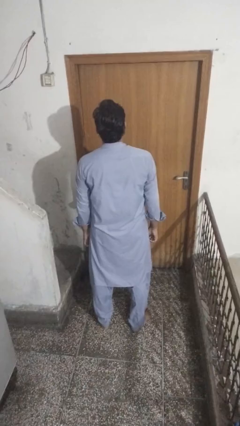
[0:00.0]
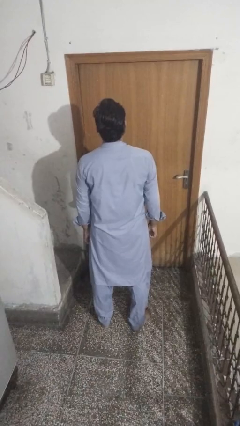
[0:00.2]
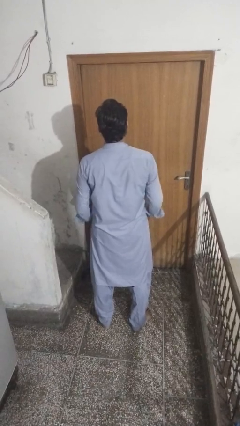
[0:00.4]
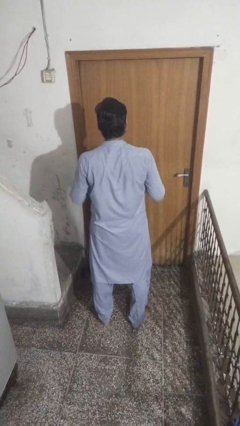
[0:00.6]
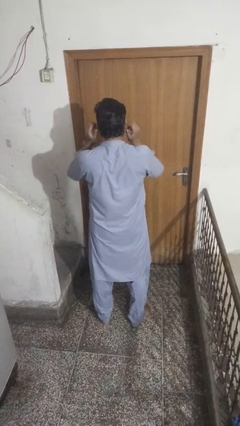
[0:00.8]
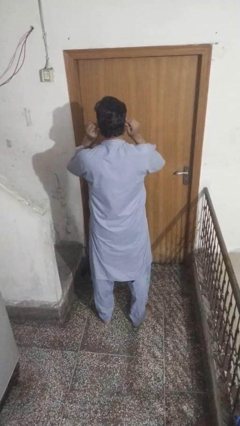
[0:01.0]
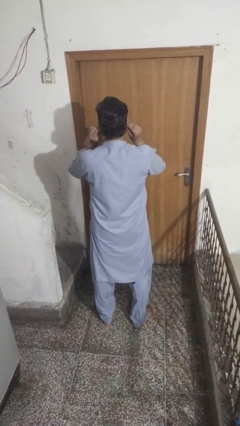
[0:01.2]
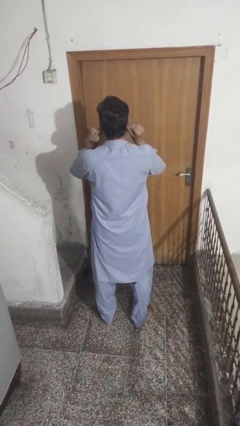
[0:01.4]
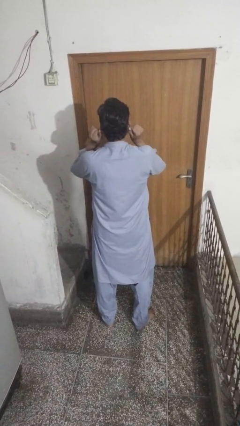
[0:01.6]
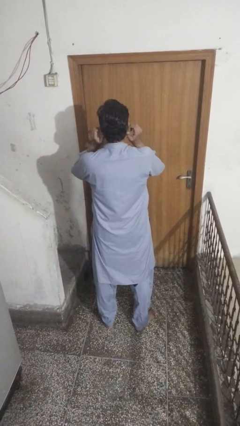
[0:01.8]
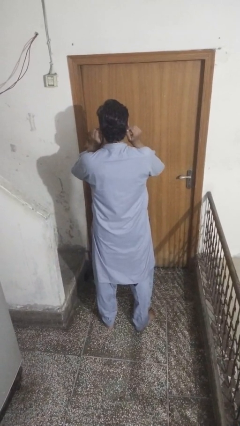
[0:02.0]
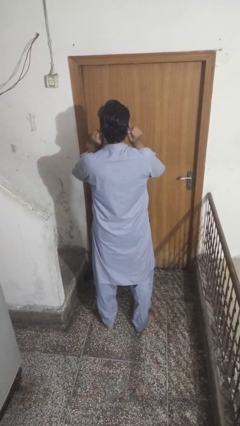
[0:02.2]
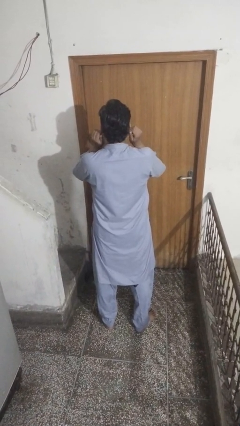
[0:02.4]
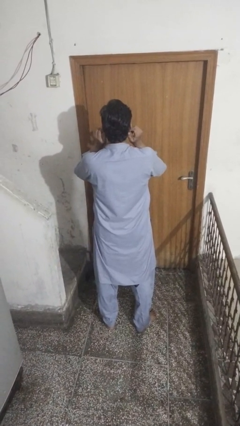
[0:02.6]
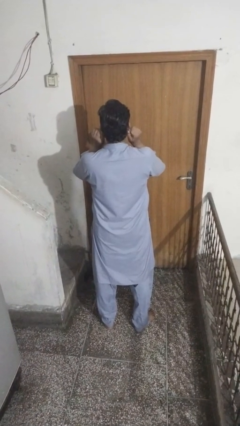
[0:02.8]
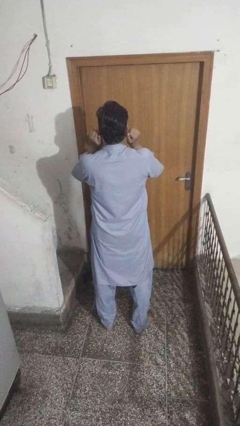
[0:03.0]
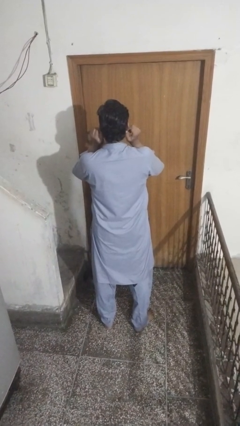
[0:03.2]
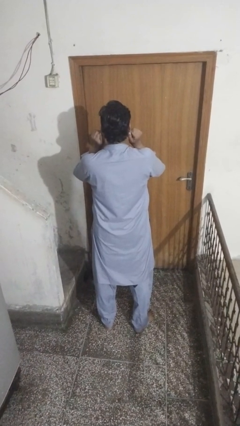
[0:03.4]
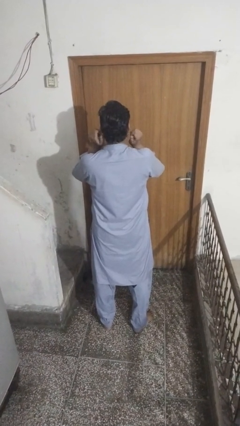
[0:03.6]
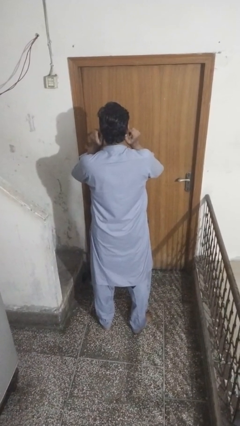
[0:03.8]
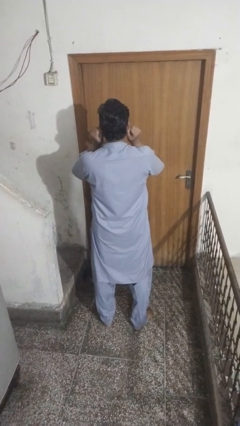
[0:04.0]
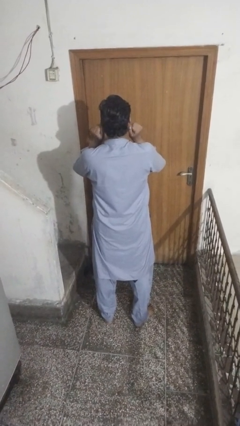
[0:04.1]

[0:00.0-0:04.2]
person touches earlobe

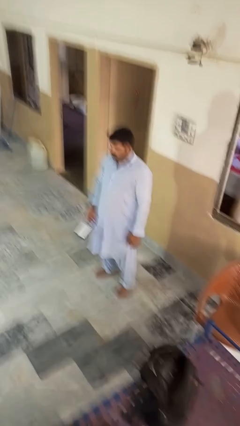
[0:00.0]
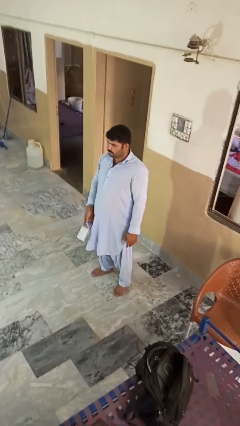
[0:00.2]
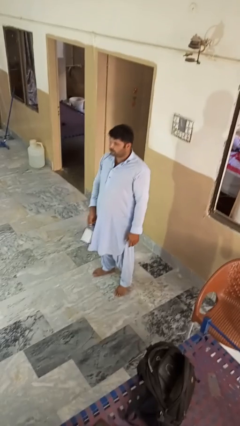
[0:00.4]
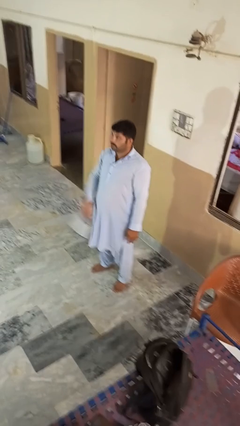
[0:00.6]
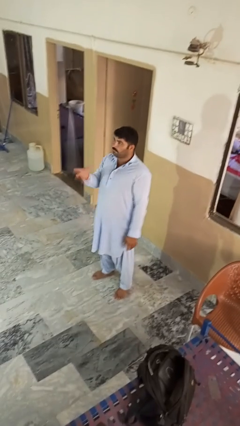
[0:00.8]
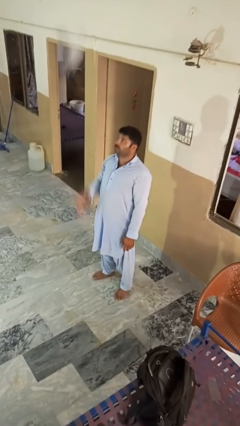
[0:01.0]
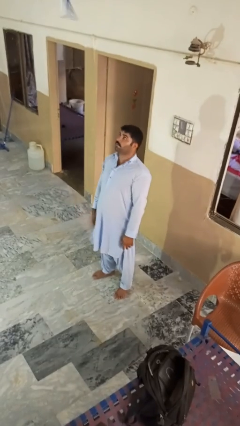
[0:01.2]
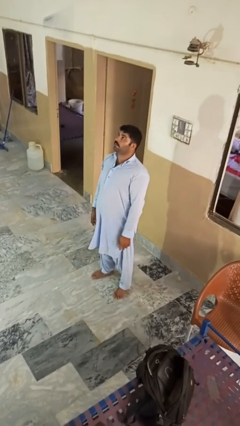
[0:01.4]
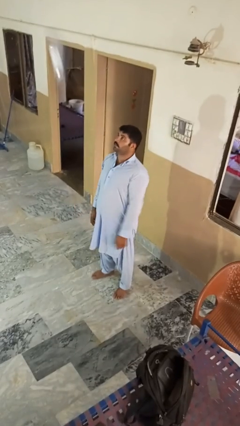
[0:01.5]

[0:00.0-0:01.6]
person drops object

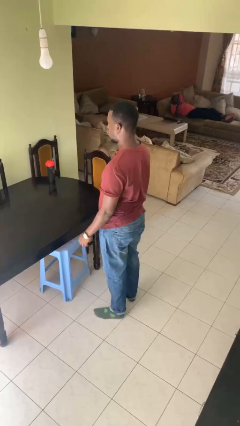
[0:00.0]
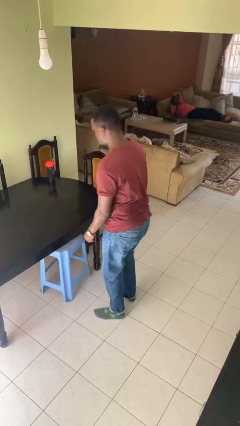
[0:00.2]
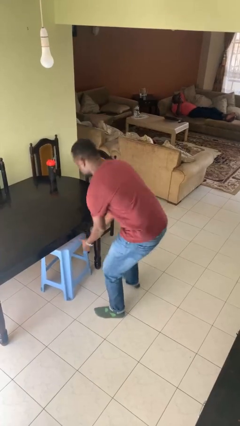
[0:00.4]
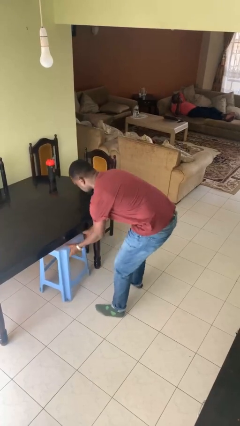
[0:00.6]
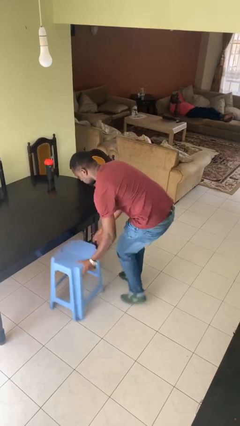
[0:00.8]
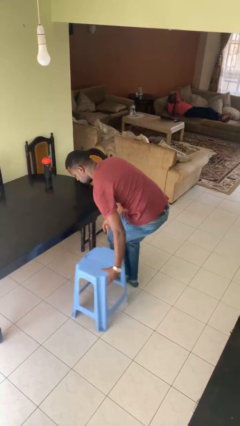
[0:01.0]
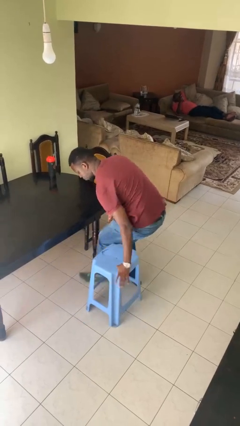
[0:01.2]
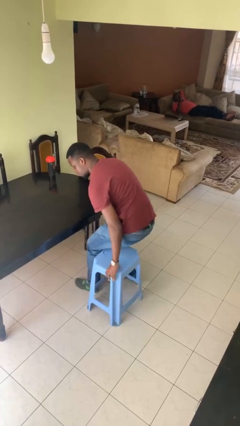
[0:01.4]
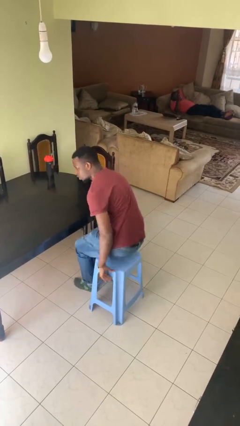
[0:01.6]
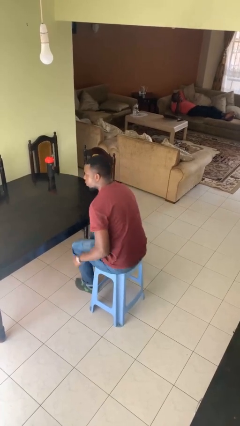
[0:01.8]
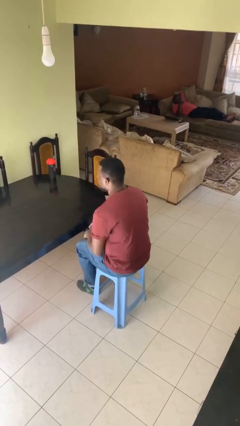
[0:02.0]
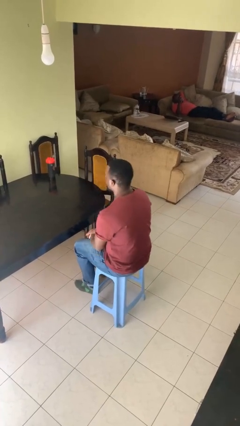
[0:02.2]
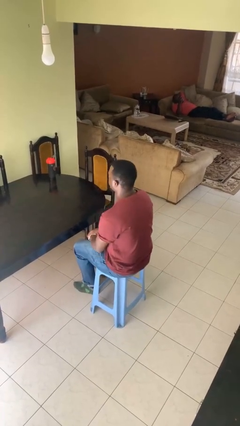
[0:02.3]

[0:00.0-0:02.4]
person sits down

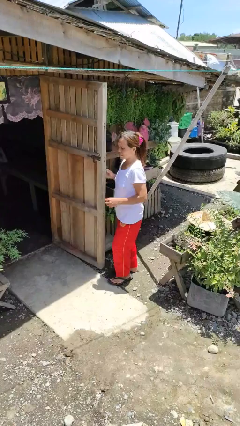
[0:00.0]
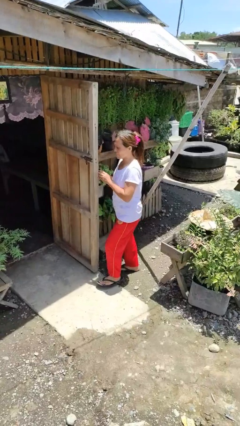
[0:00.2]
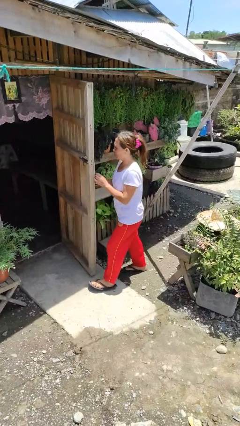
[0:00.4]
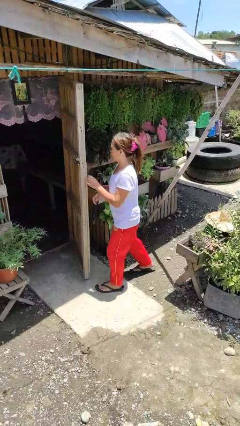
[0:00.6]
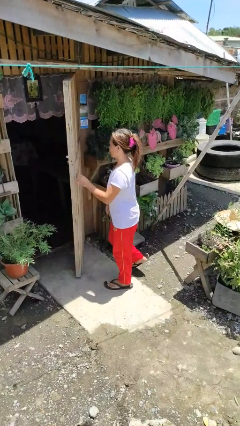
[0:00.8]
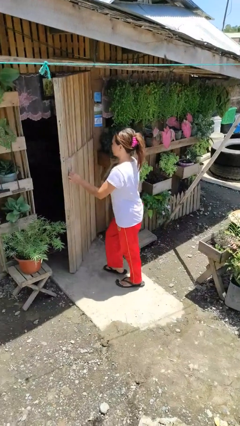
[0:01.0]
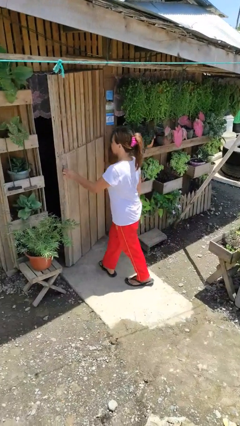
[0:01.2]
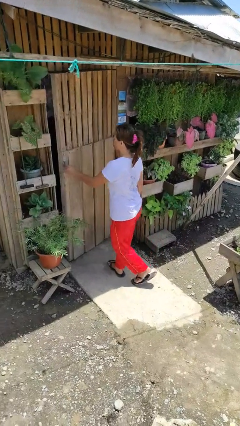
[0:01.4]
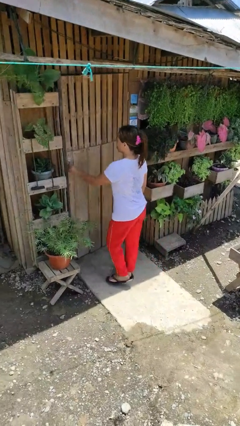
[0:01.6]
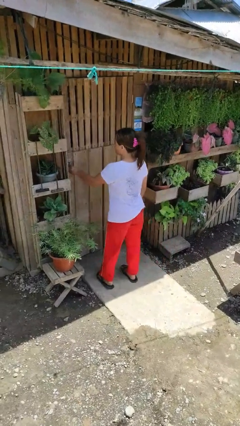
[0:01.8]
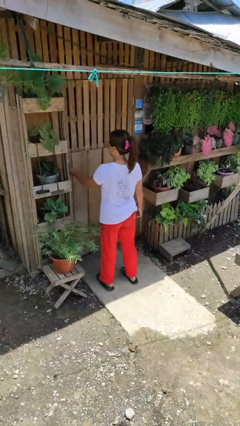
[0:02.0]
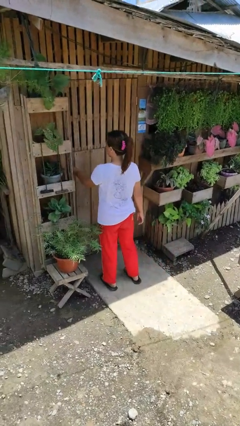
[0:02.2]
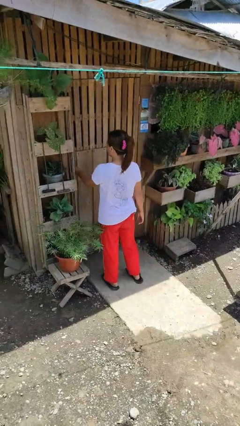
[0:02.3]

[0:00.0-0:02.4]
person closes facility door

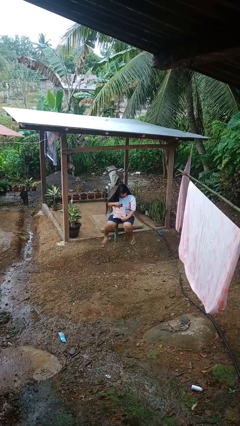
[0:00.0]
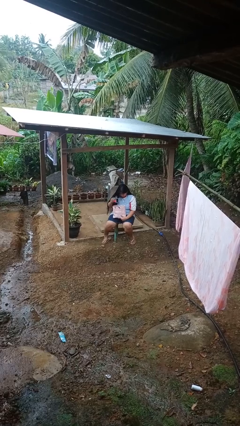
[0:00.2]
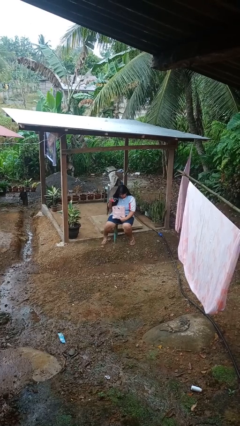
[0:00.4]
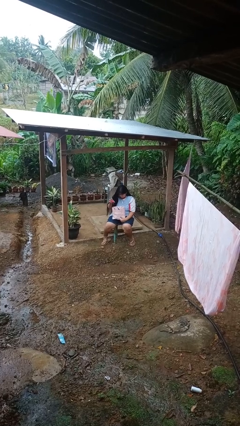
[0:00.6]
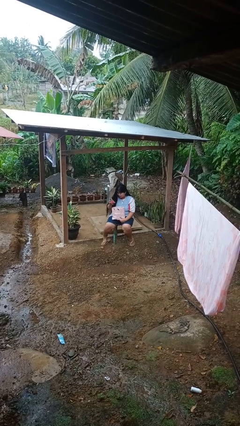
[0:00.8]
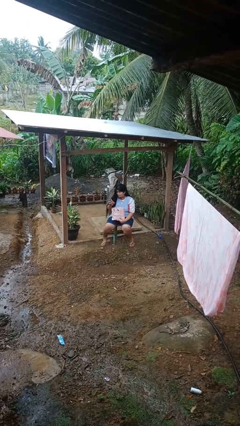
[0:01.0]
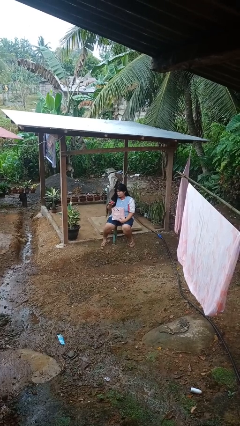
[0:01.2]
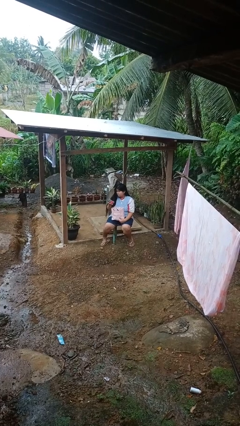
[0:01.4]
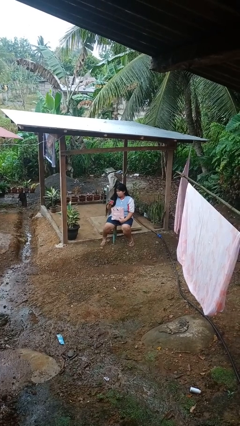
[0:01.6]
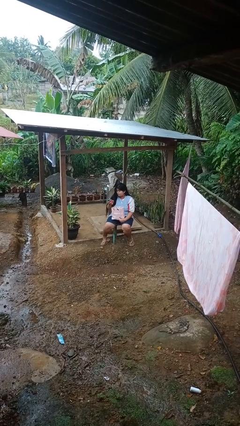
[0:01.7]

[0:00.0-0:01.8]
person takes object from bag

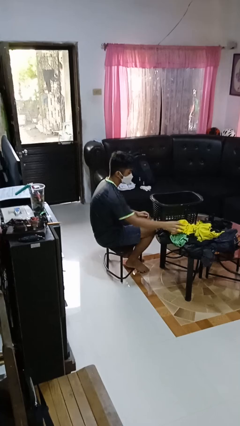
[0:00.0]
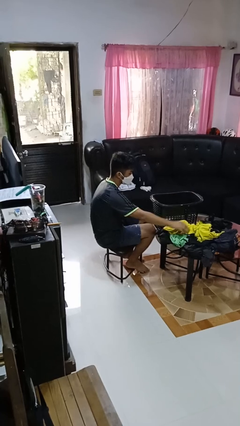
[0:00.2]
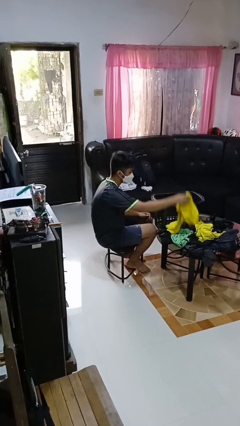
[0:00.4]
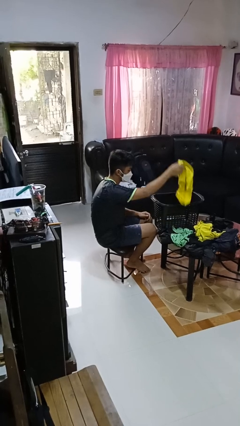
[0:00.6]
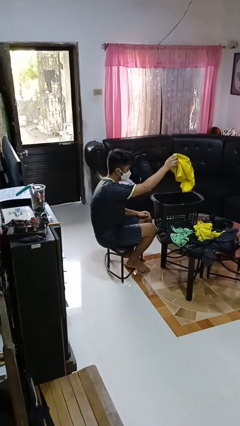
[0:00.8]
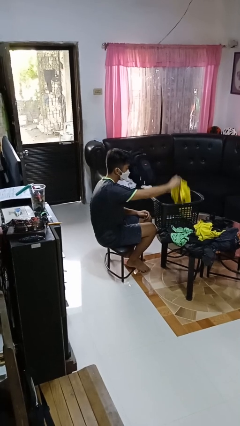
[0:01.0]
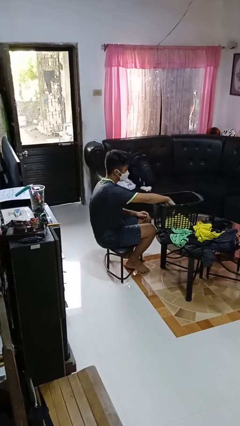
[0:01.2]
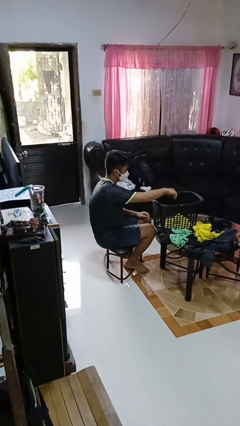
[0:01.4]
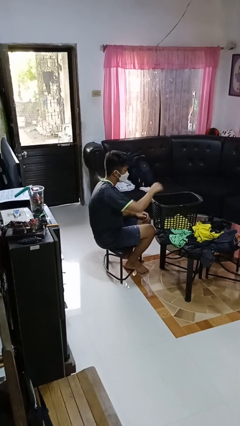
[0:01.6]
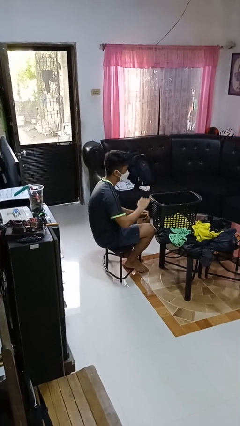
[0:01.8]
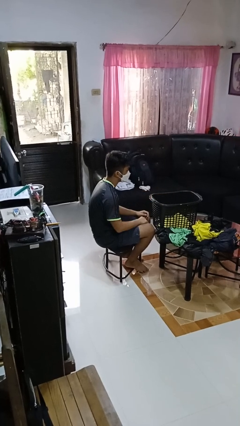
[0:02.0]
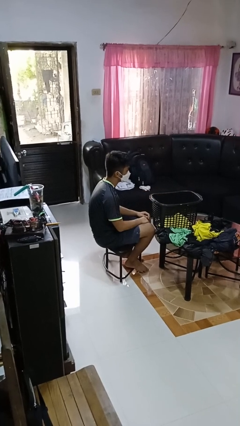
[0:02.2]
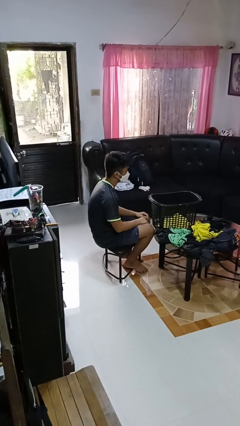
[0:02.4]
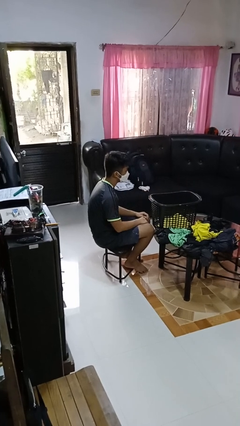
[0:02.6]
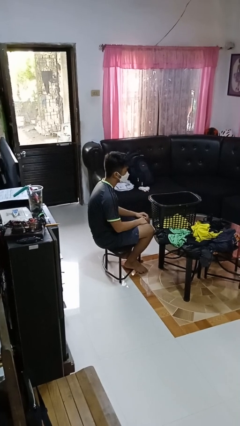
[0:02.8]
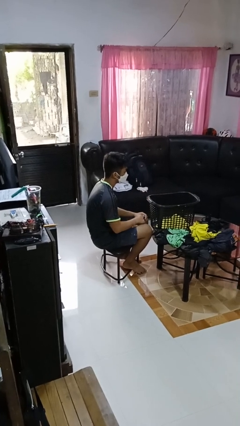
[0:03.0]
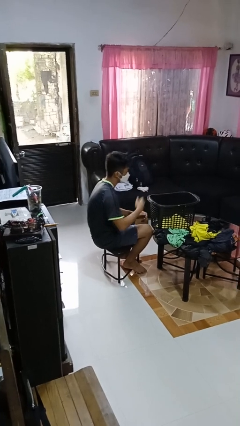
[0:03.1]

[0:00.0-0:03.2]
person puts object into basket

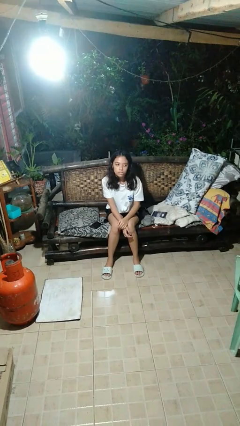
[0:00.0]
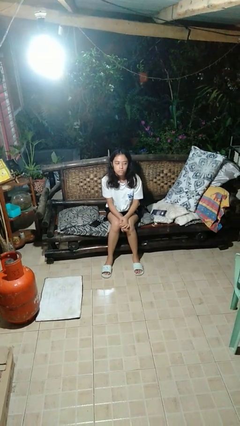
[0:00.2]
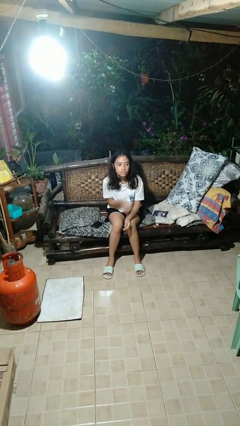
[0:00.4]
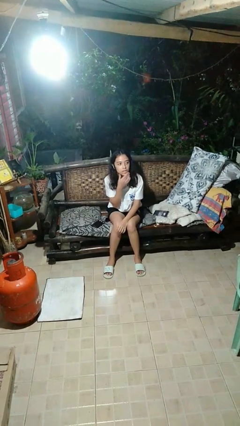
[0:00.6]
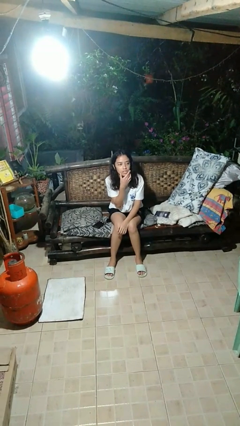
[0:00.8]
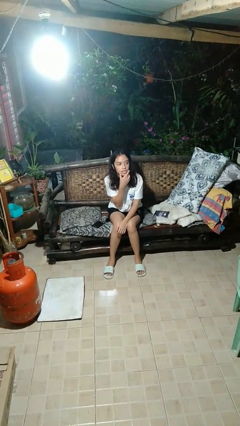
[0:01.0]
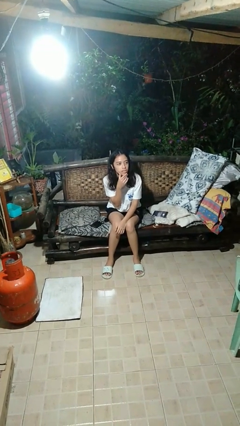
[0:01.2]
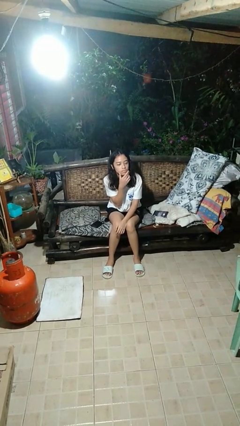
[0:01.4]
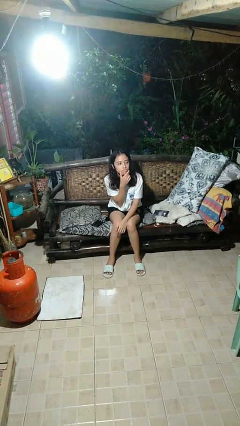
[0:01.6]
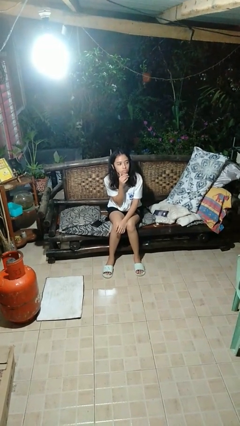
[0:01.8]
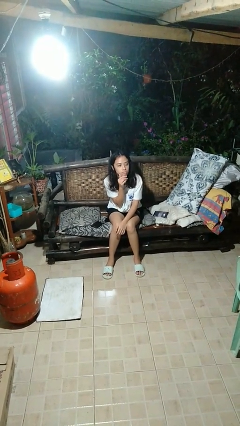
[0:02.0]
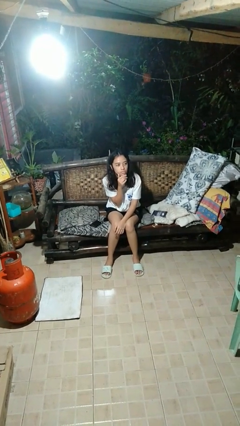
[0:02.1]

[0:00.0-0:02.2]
person strokes chin
